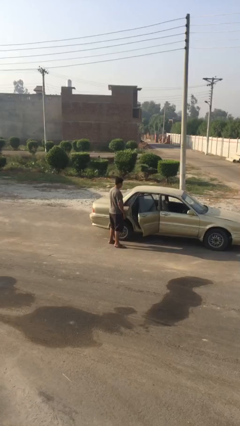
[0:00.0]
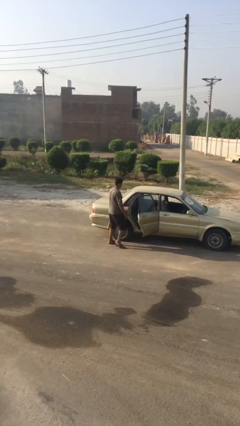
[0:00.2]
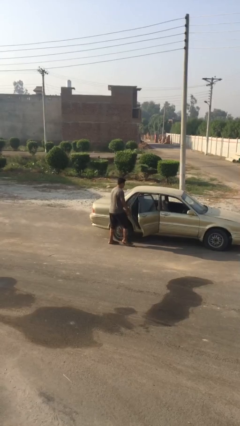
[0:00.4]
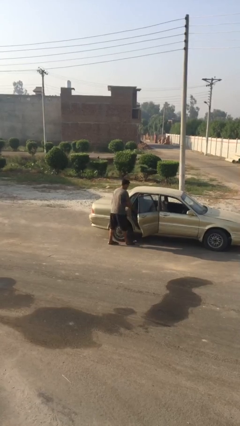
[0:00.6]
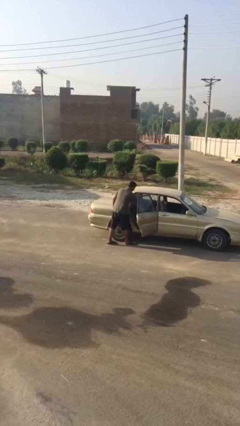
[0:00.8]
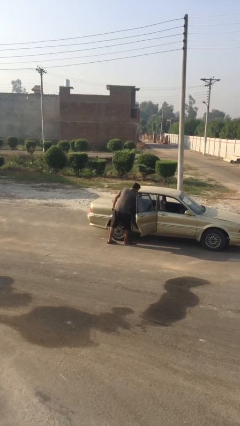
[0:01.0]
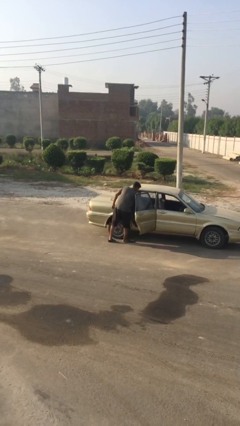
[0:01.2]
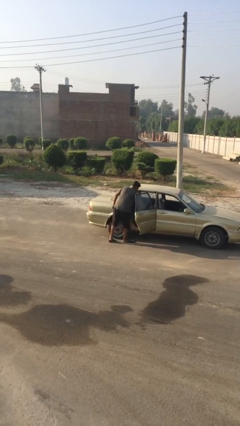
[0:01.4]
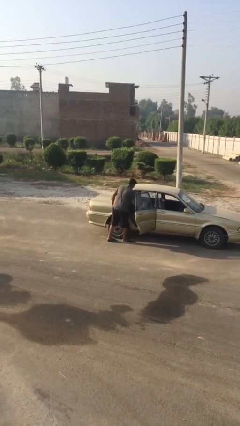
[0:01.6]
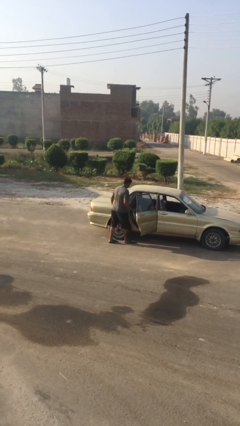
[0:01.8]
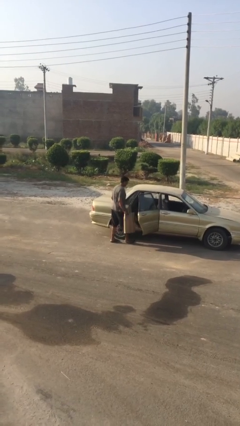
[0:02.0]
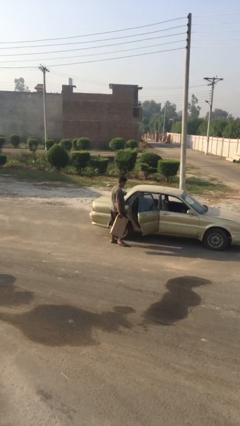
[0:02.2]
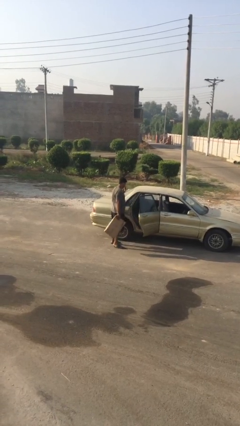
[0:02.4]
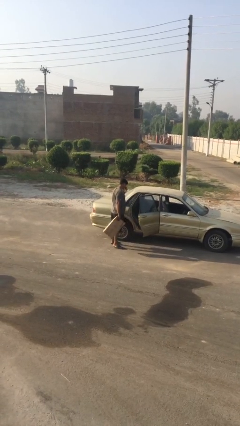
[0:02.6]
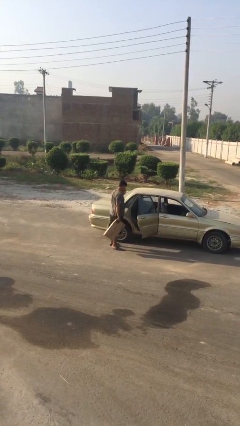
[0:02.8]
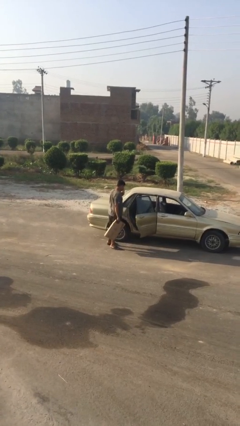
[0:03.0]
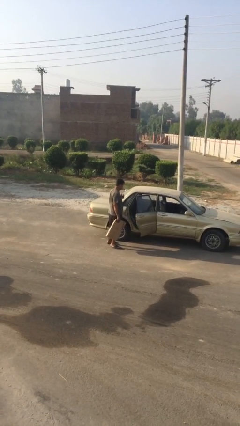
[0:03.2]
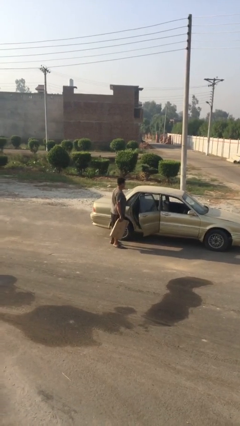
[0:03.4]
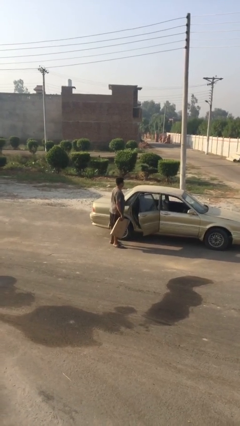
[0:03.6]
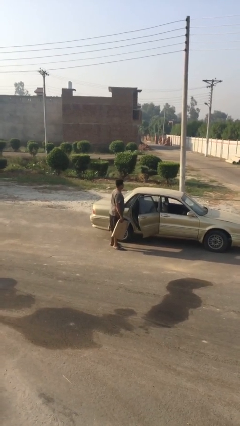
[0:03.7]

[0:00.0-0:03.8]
person unloads car

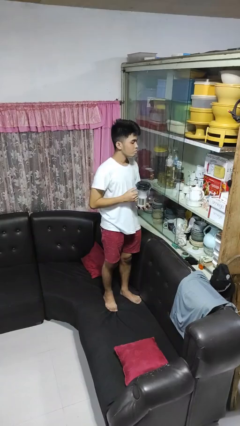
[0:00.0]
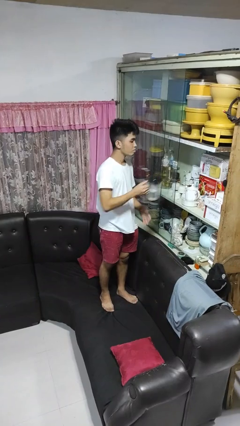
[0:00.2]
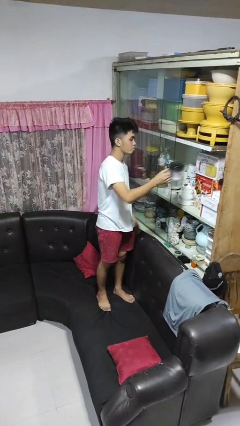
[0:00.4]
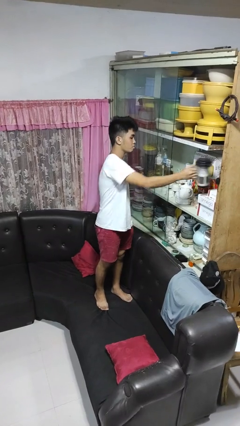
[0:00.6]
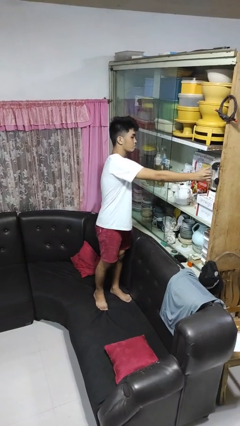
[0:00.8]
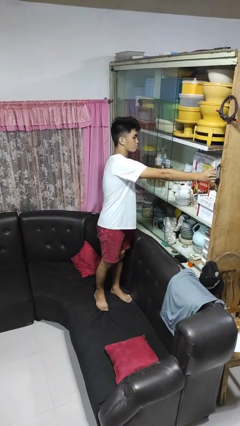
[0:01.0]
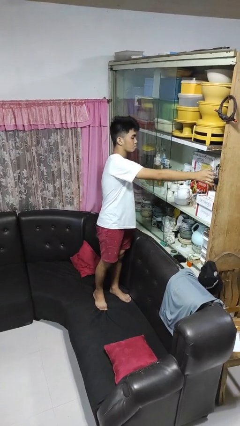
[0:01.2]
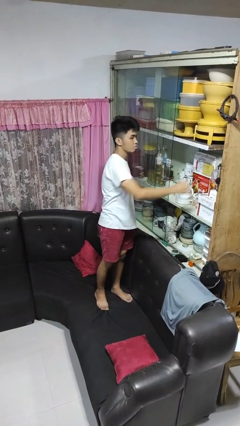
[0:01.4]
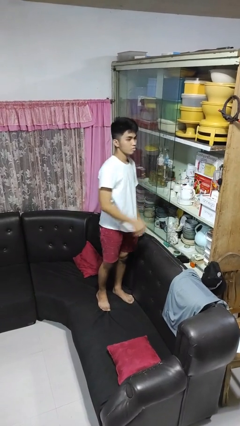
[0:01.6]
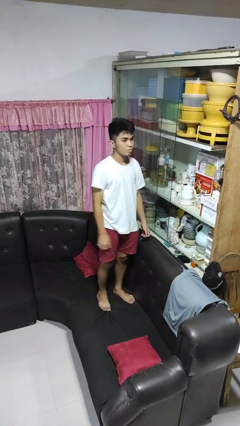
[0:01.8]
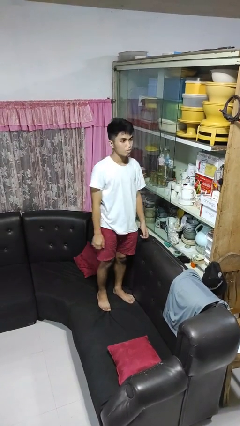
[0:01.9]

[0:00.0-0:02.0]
person puts down object into cabinet

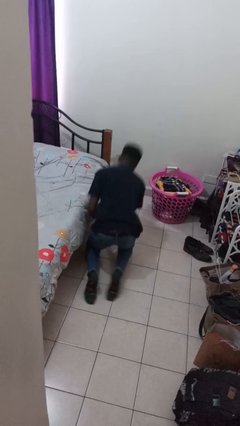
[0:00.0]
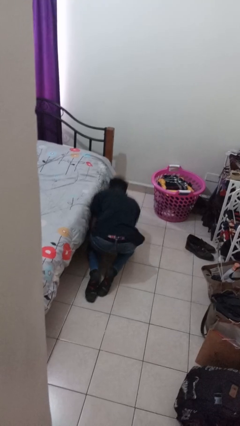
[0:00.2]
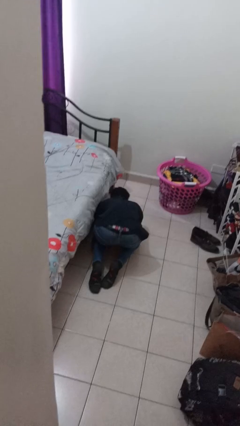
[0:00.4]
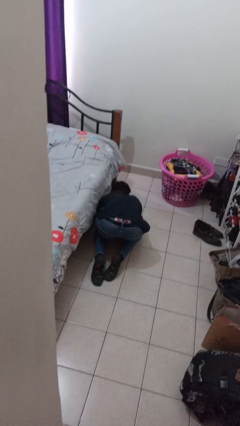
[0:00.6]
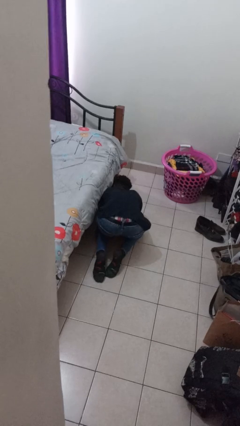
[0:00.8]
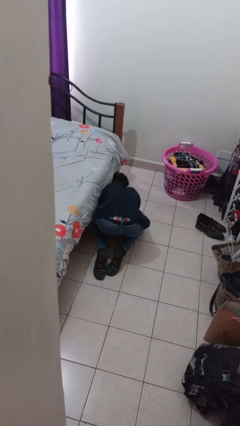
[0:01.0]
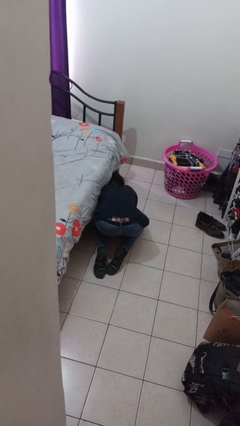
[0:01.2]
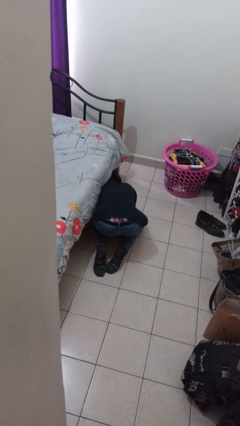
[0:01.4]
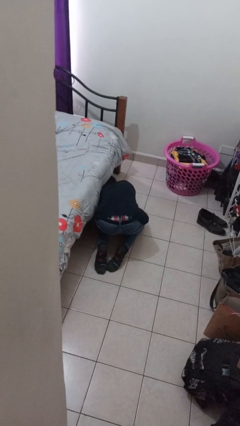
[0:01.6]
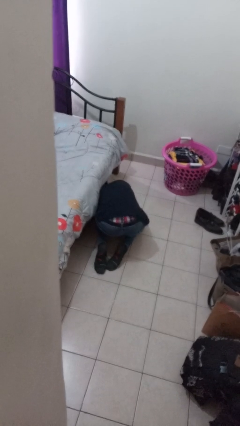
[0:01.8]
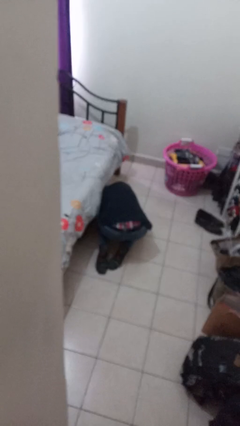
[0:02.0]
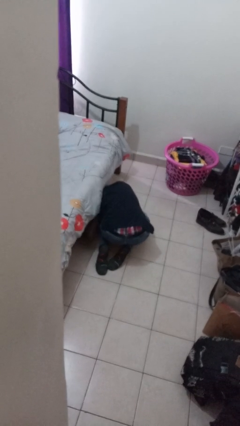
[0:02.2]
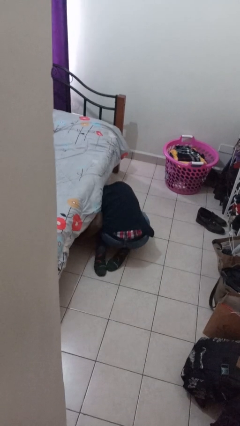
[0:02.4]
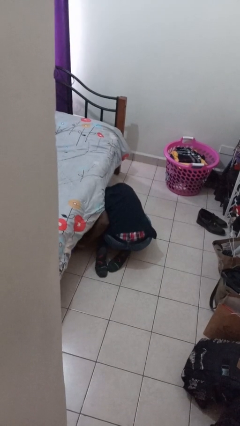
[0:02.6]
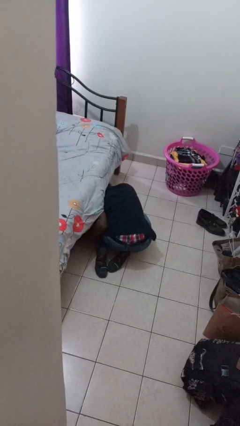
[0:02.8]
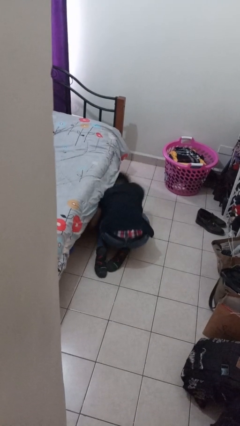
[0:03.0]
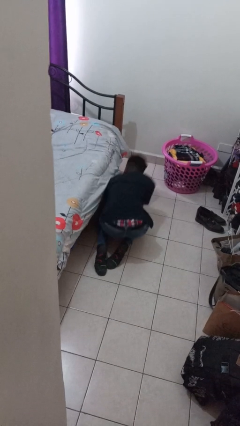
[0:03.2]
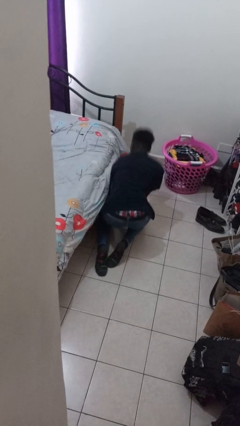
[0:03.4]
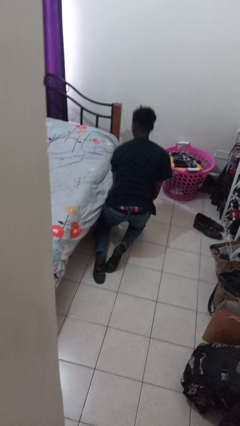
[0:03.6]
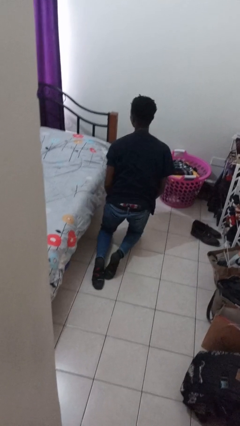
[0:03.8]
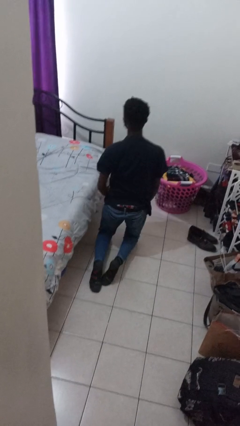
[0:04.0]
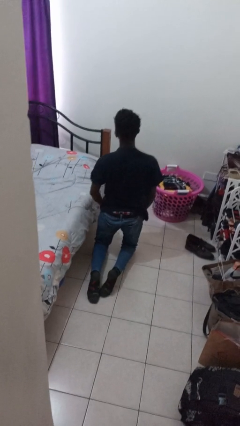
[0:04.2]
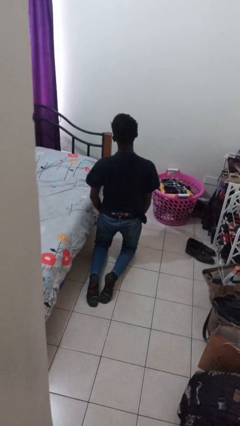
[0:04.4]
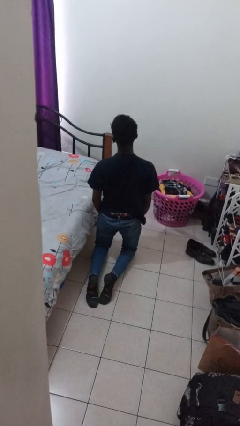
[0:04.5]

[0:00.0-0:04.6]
person searches under bed

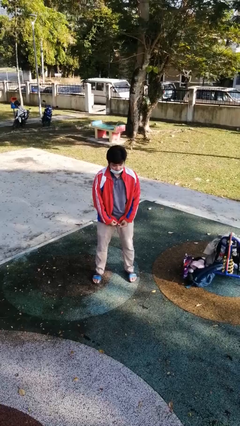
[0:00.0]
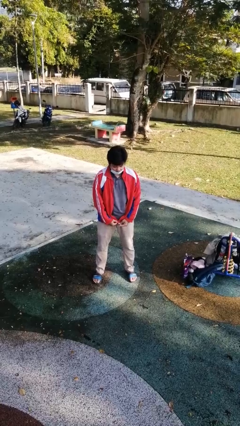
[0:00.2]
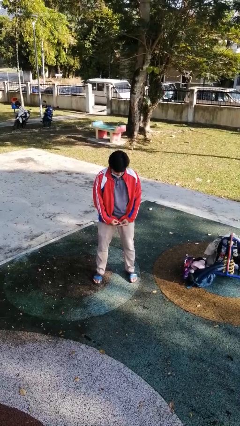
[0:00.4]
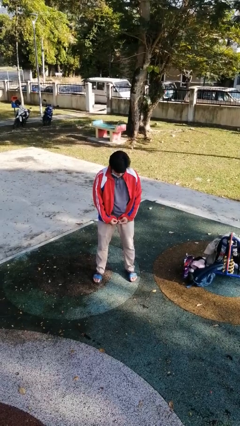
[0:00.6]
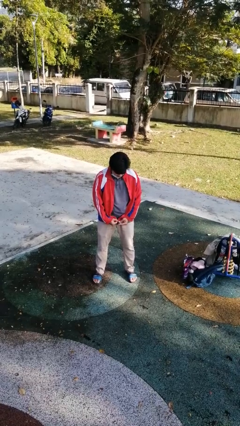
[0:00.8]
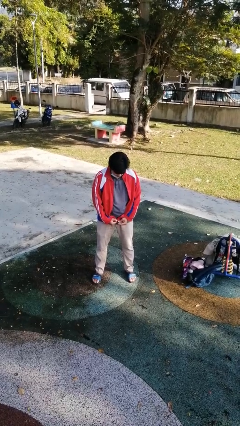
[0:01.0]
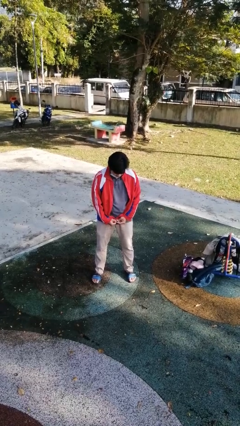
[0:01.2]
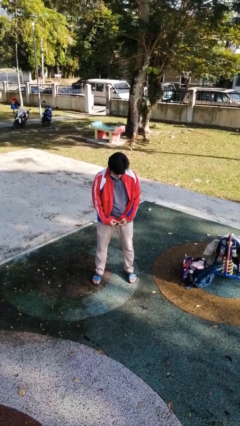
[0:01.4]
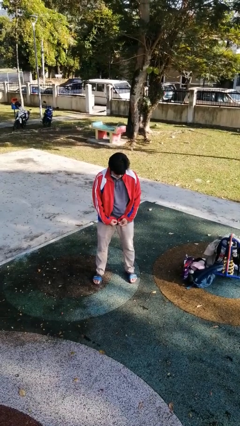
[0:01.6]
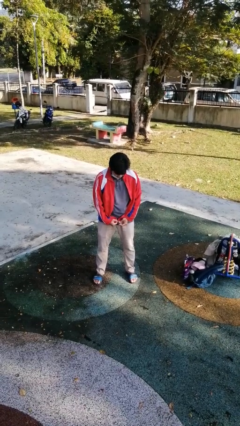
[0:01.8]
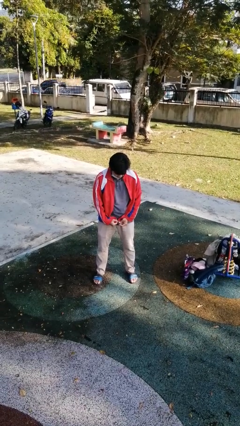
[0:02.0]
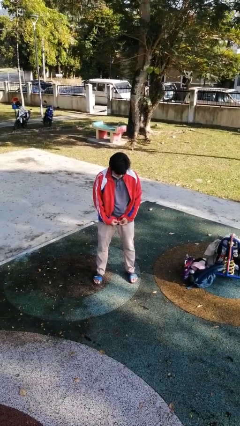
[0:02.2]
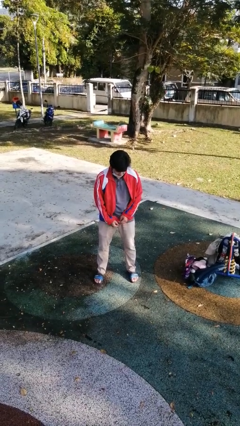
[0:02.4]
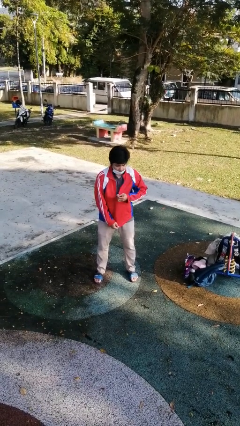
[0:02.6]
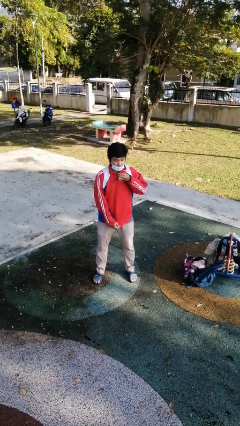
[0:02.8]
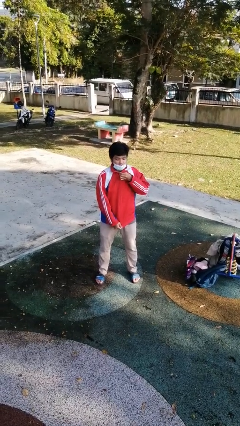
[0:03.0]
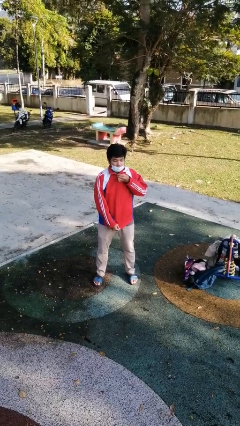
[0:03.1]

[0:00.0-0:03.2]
person zips up jacket

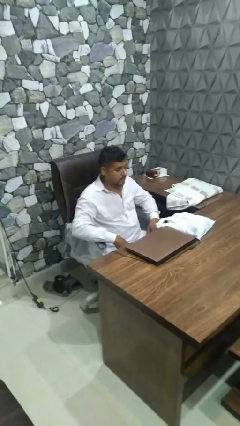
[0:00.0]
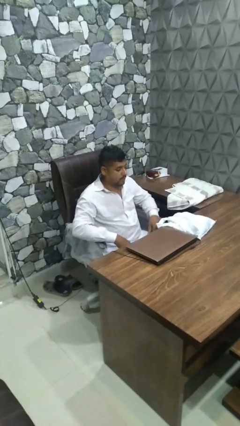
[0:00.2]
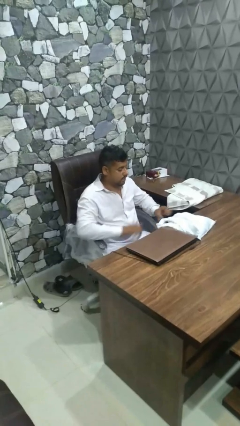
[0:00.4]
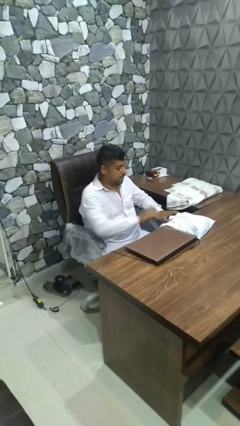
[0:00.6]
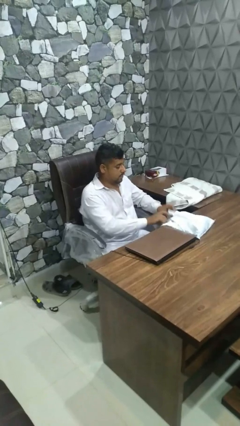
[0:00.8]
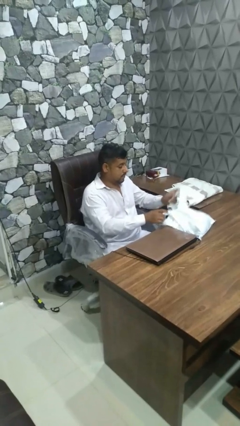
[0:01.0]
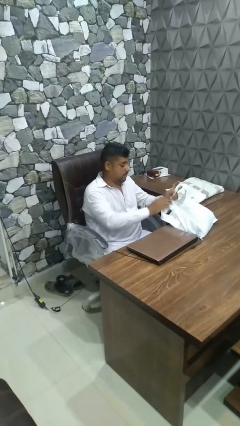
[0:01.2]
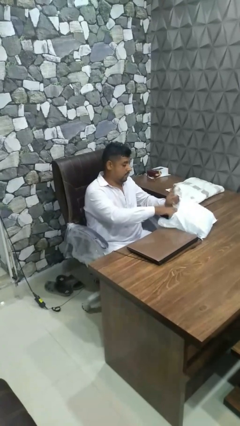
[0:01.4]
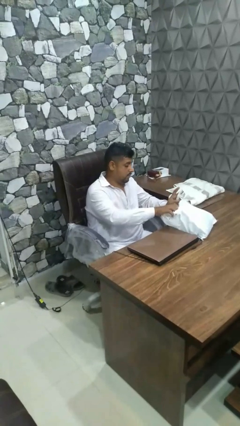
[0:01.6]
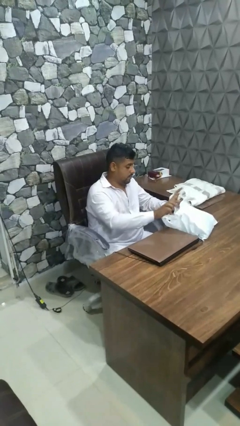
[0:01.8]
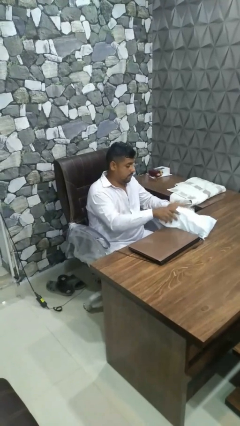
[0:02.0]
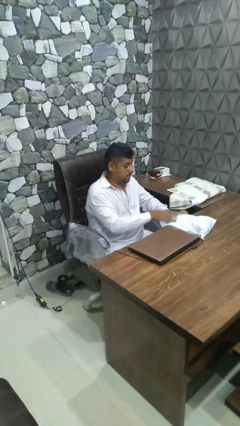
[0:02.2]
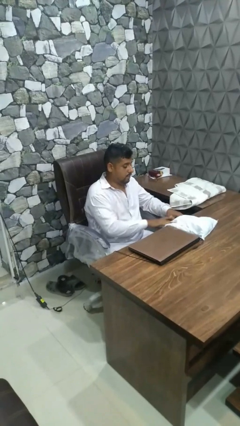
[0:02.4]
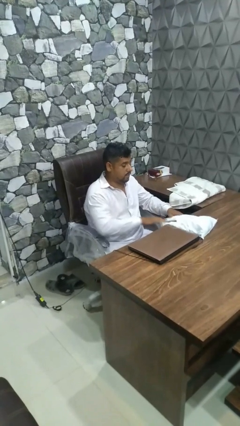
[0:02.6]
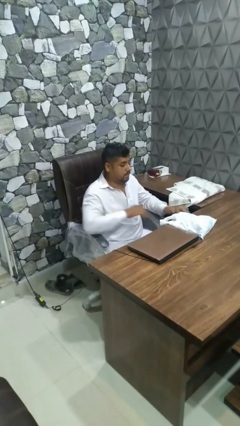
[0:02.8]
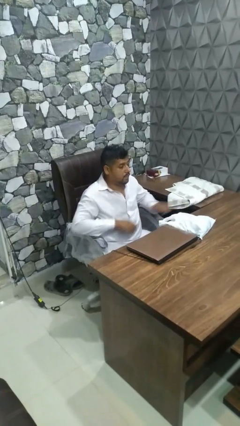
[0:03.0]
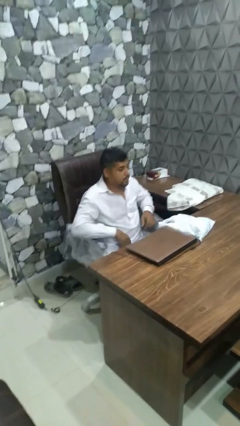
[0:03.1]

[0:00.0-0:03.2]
person searches in bag

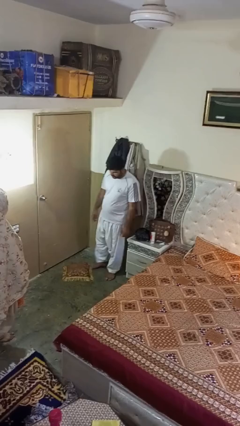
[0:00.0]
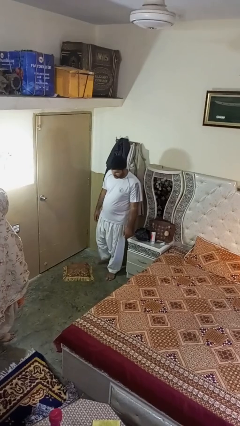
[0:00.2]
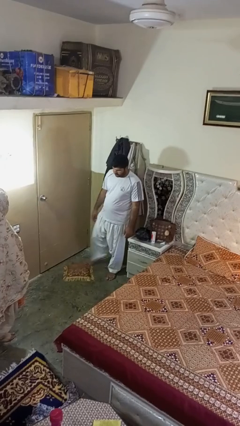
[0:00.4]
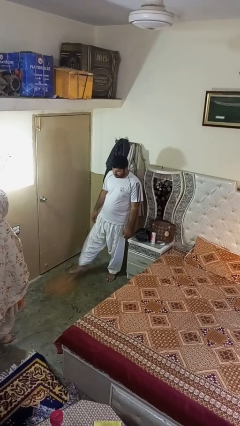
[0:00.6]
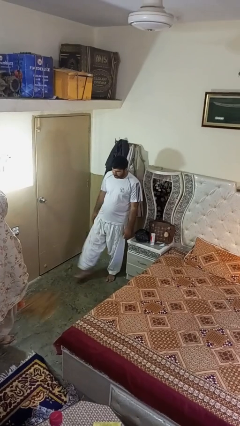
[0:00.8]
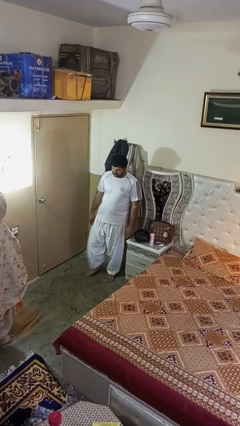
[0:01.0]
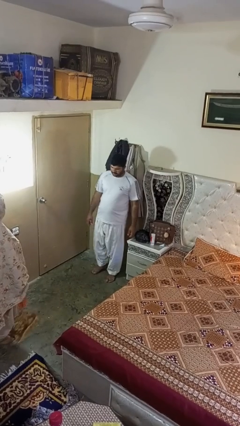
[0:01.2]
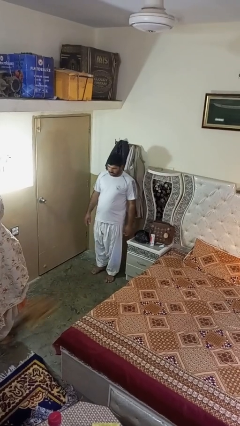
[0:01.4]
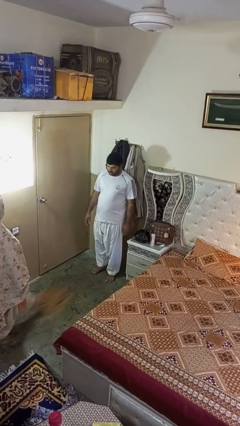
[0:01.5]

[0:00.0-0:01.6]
person kicks object to person
